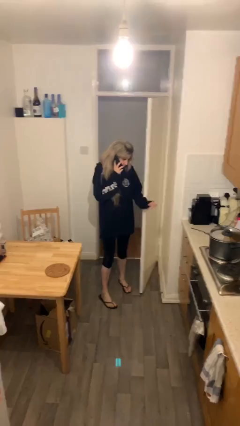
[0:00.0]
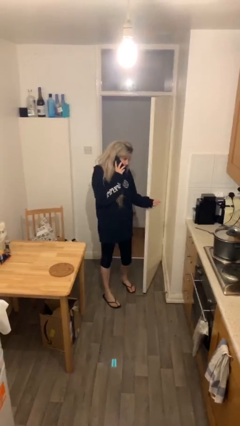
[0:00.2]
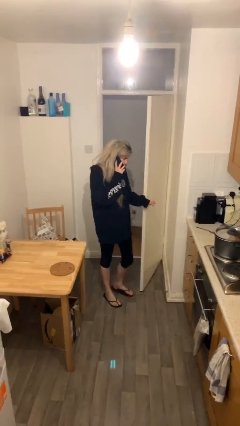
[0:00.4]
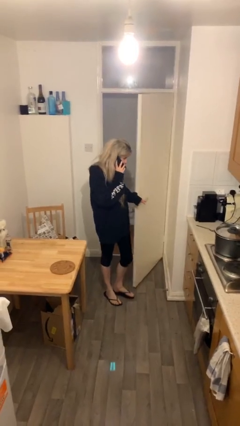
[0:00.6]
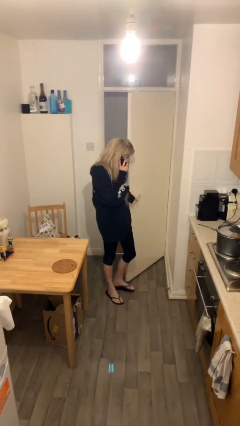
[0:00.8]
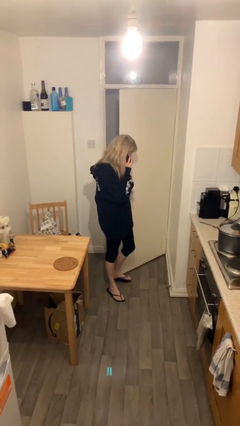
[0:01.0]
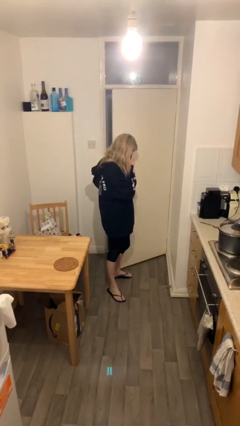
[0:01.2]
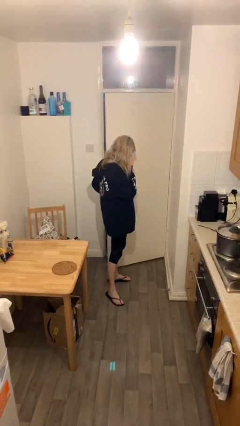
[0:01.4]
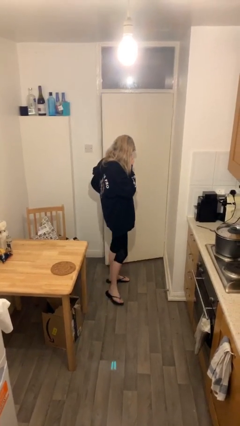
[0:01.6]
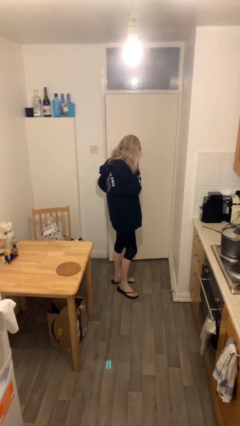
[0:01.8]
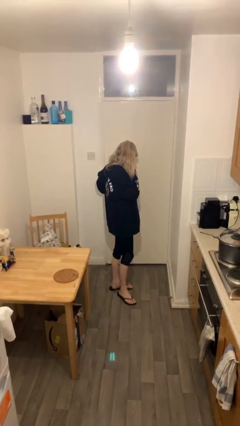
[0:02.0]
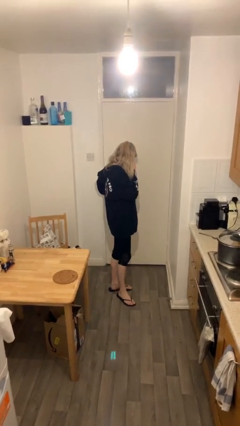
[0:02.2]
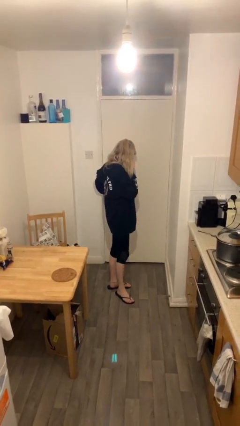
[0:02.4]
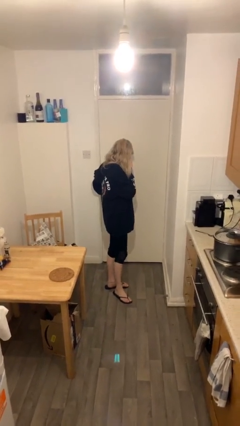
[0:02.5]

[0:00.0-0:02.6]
person closes facility door

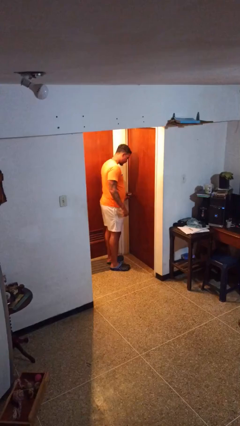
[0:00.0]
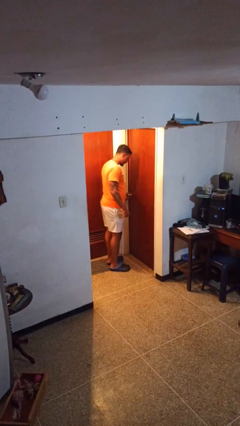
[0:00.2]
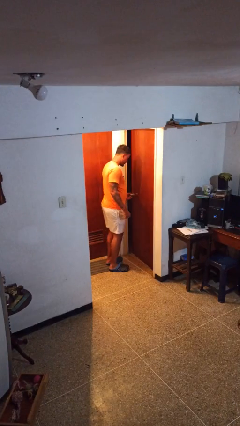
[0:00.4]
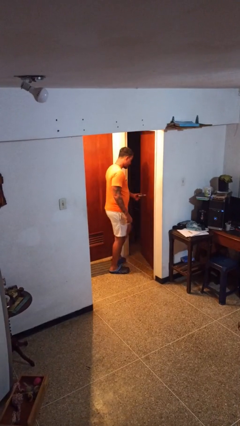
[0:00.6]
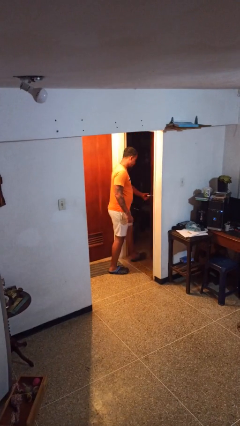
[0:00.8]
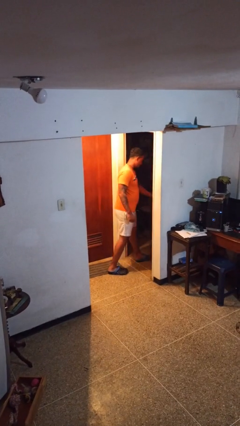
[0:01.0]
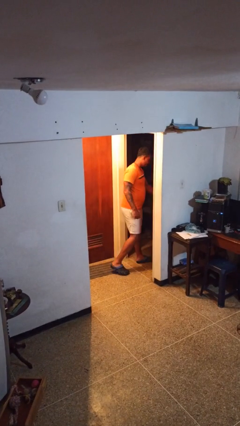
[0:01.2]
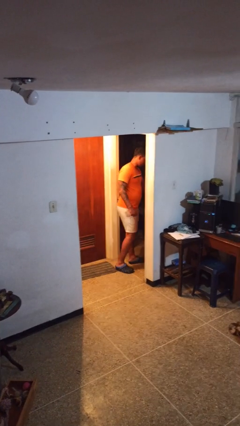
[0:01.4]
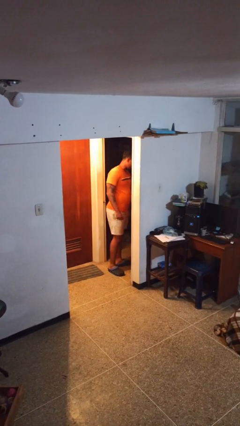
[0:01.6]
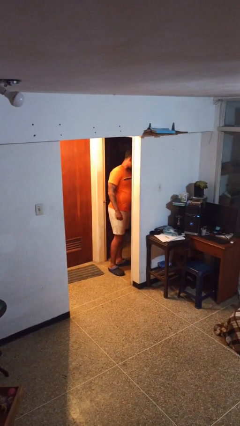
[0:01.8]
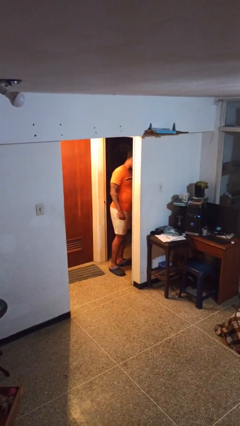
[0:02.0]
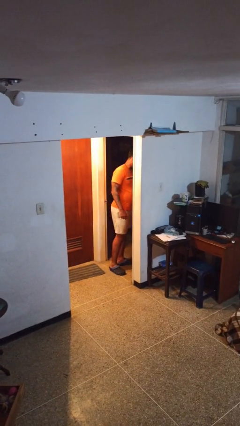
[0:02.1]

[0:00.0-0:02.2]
person opens facility door

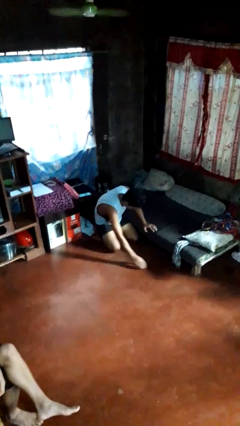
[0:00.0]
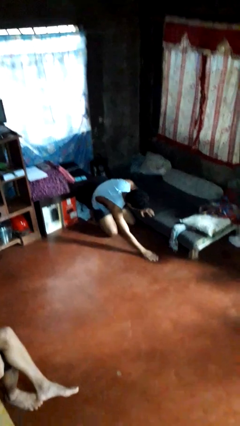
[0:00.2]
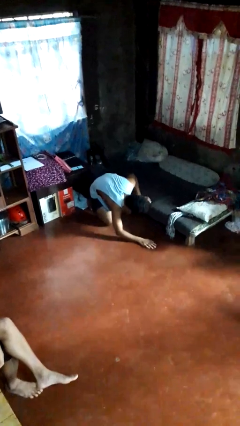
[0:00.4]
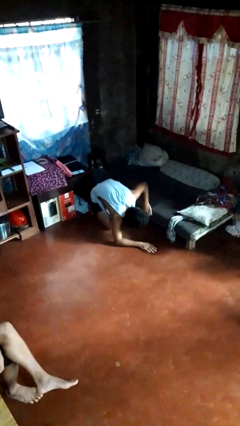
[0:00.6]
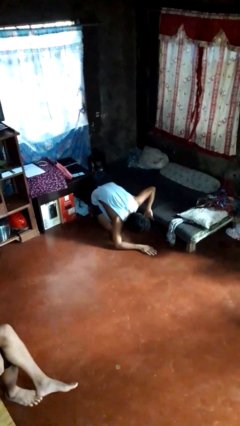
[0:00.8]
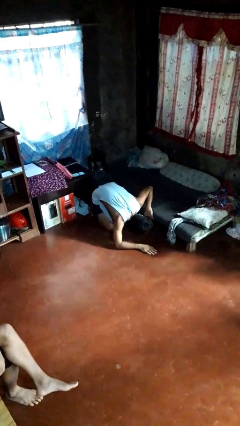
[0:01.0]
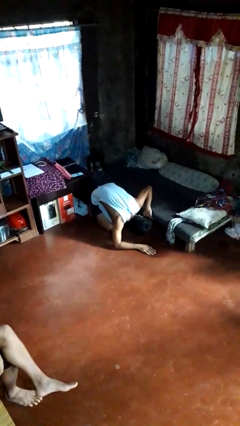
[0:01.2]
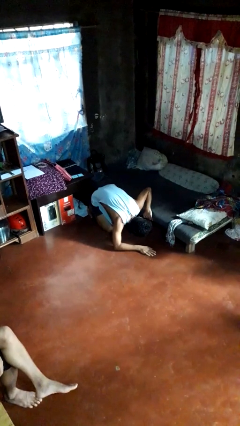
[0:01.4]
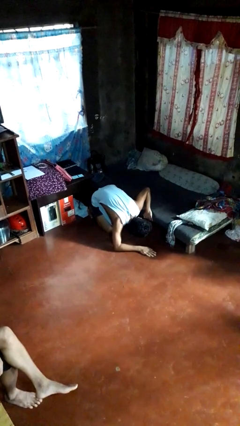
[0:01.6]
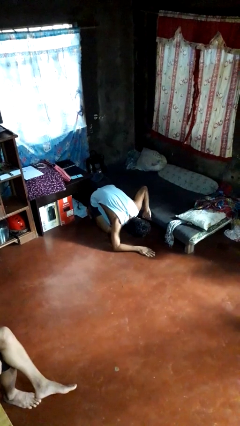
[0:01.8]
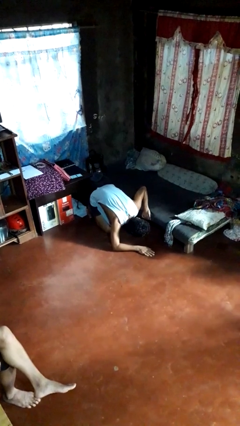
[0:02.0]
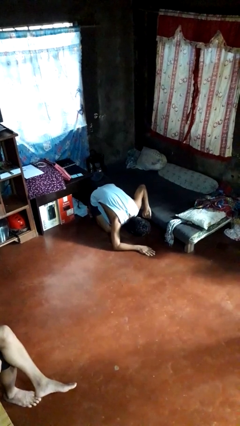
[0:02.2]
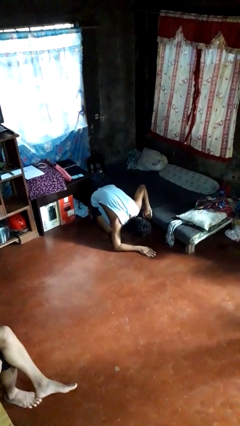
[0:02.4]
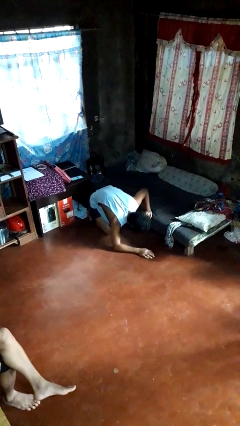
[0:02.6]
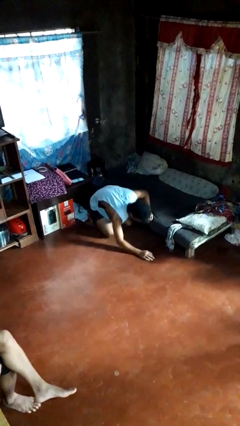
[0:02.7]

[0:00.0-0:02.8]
person searches under bed

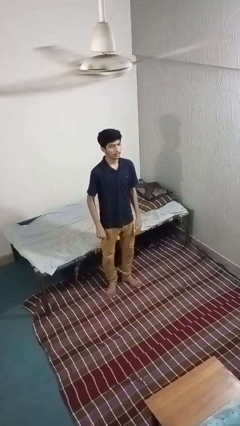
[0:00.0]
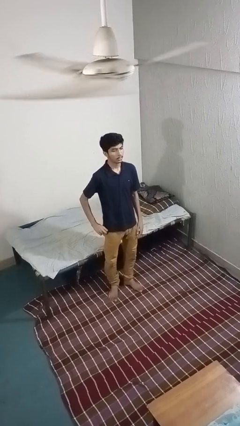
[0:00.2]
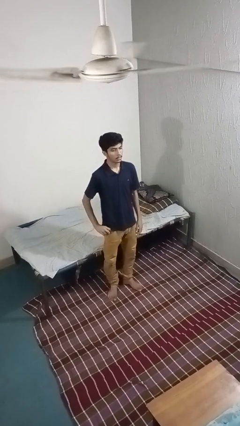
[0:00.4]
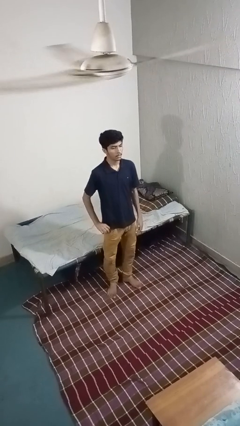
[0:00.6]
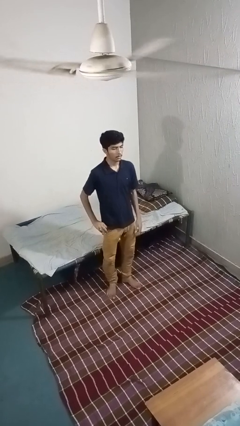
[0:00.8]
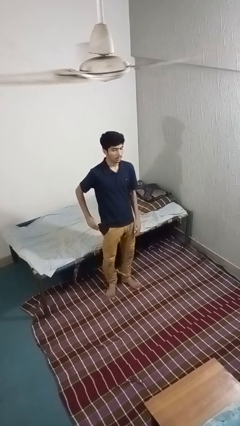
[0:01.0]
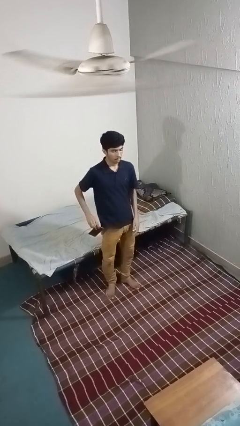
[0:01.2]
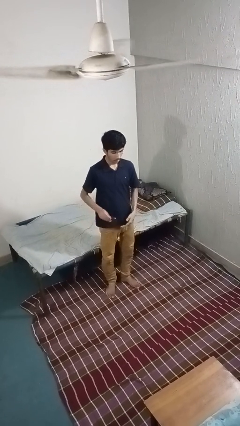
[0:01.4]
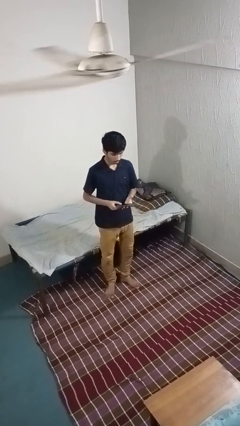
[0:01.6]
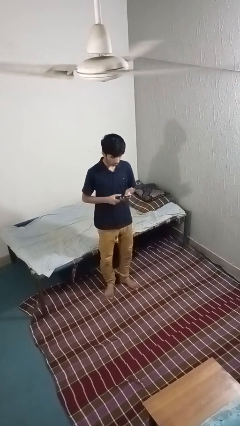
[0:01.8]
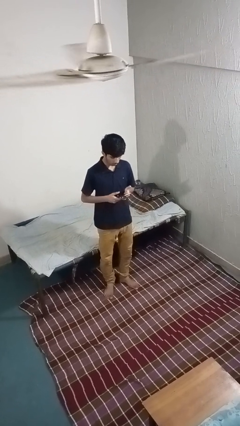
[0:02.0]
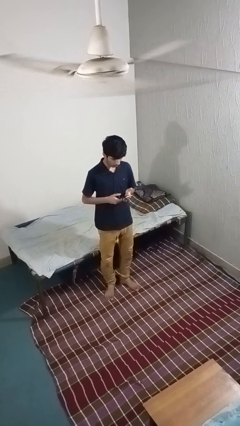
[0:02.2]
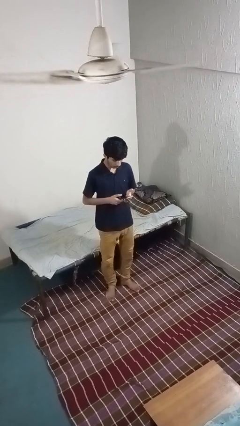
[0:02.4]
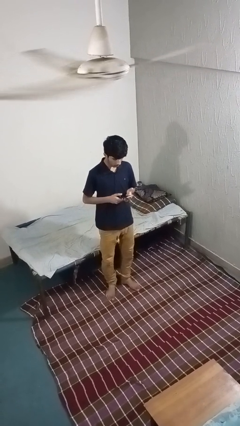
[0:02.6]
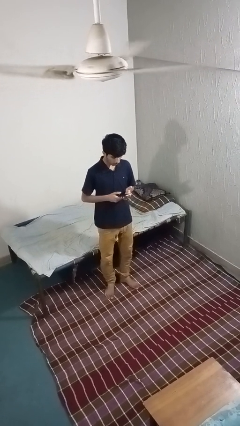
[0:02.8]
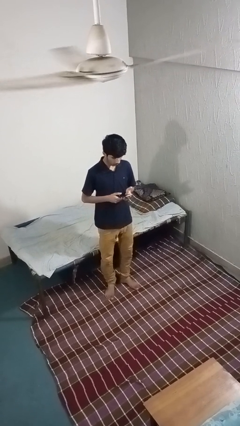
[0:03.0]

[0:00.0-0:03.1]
person takes phone from pocket

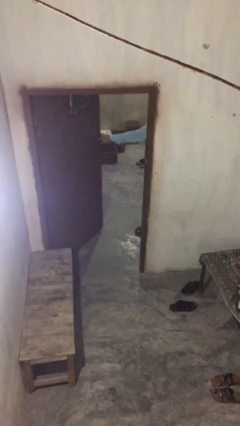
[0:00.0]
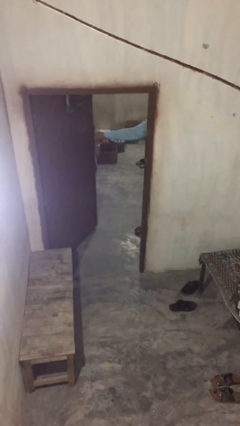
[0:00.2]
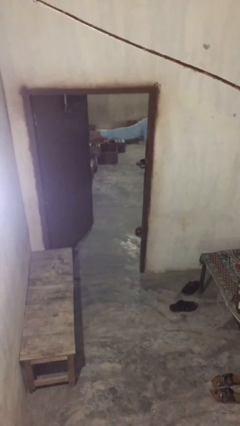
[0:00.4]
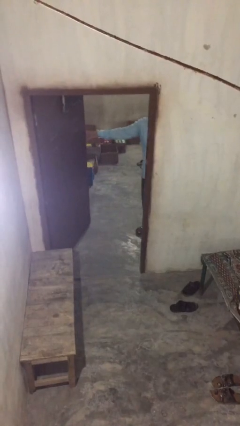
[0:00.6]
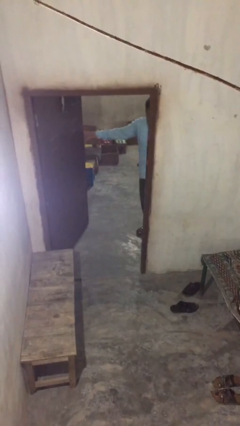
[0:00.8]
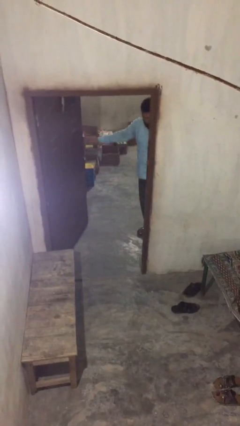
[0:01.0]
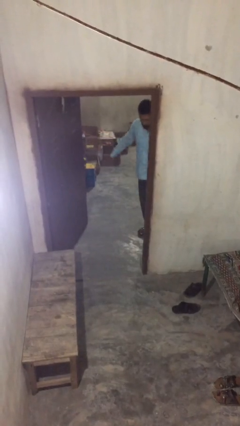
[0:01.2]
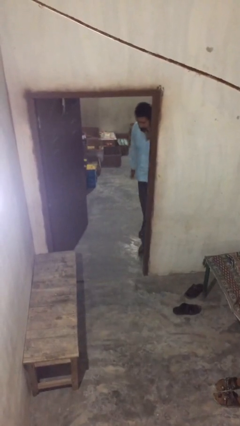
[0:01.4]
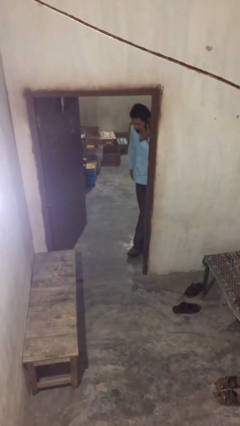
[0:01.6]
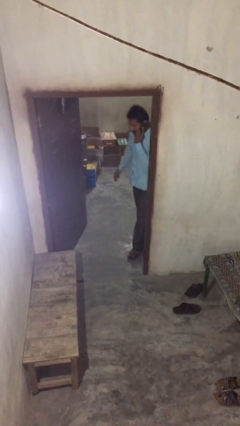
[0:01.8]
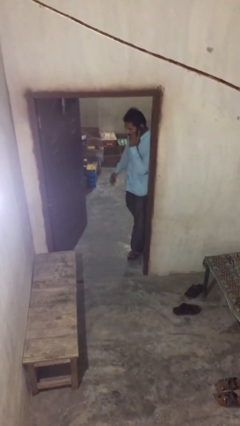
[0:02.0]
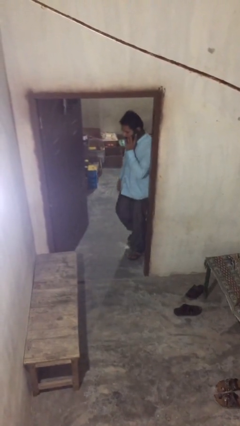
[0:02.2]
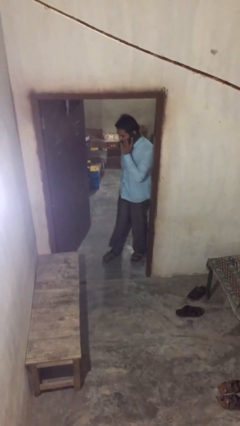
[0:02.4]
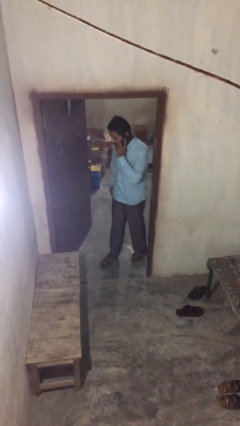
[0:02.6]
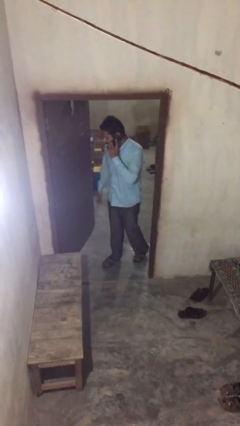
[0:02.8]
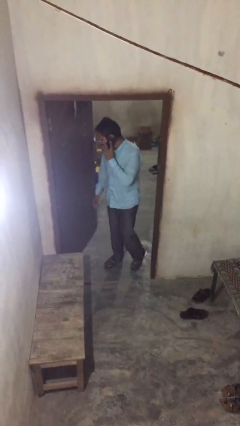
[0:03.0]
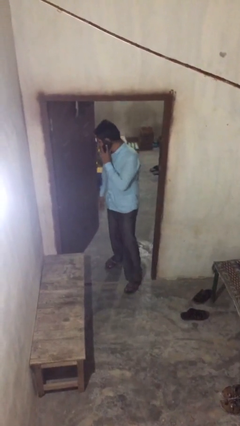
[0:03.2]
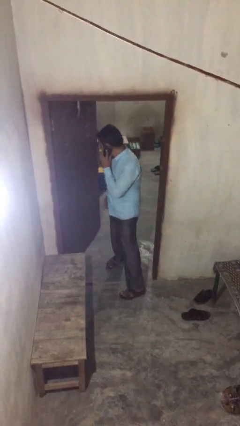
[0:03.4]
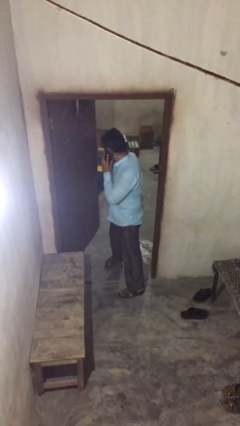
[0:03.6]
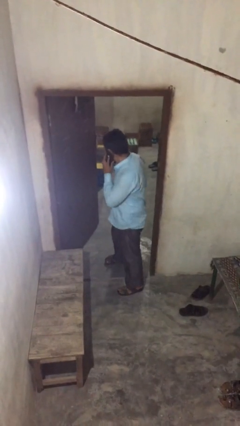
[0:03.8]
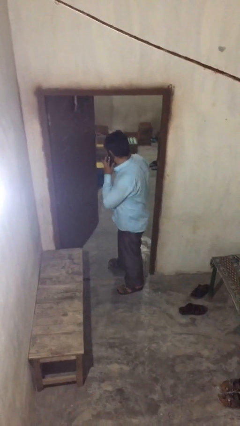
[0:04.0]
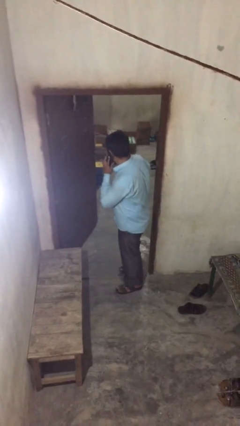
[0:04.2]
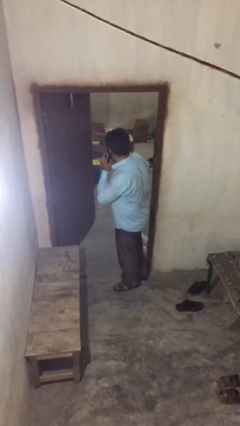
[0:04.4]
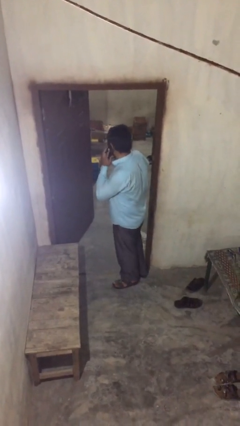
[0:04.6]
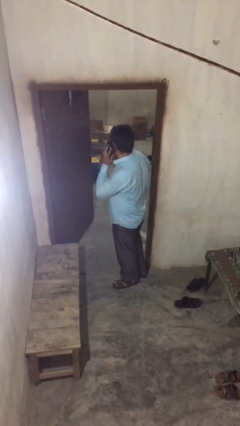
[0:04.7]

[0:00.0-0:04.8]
person enters scene through structure

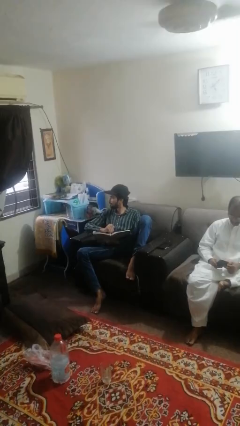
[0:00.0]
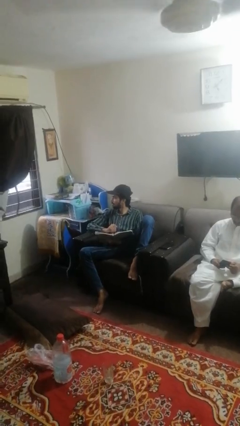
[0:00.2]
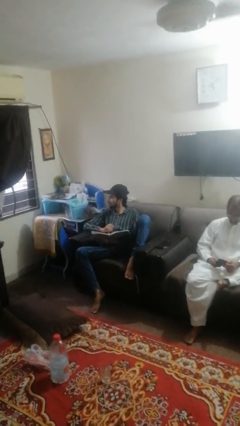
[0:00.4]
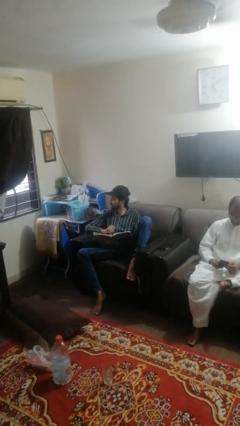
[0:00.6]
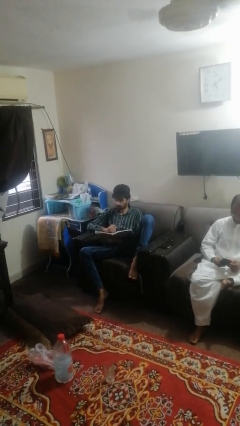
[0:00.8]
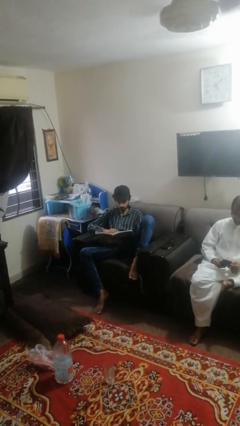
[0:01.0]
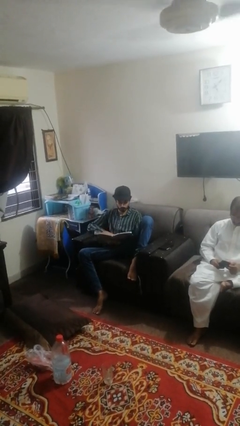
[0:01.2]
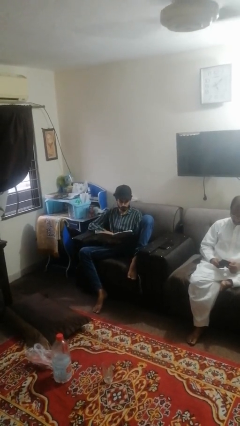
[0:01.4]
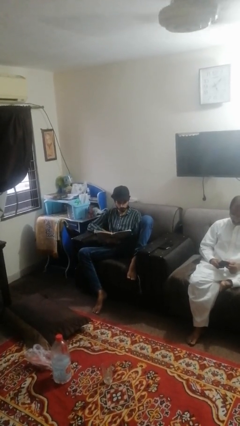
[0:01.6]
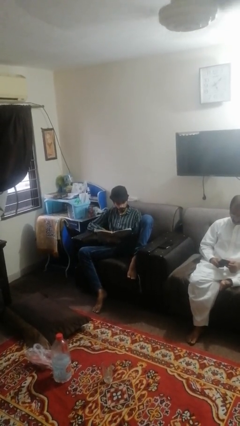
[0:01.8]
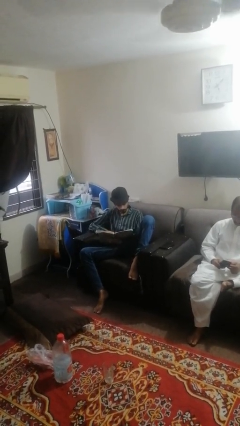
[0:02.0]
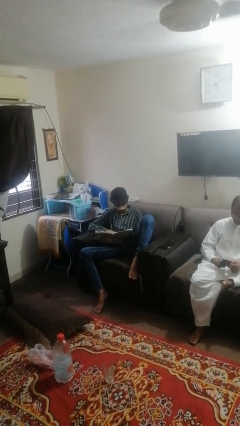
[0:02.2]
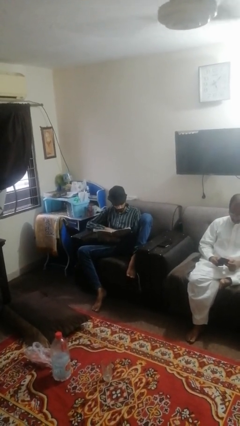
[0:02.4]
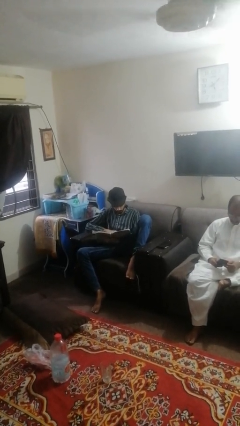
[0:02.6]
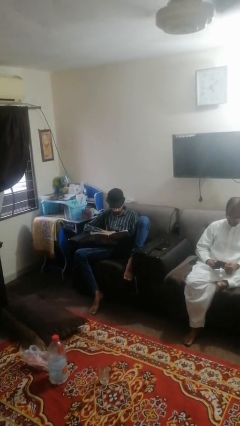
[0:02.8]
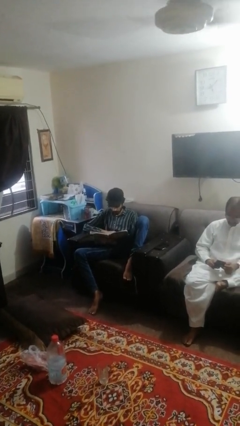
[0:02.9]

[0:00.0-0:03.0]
person reads magazine
